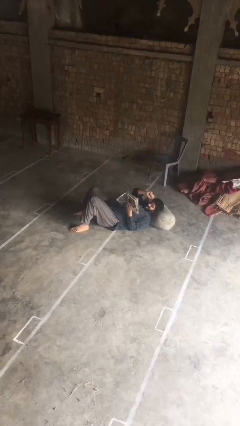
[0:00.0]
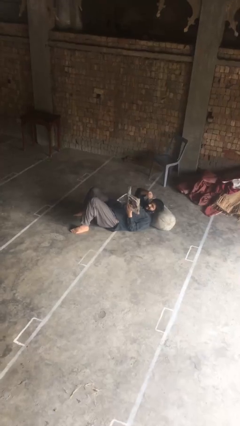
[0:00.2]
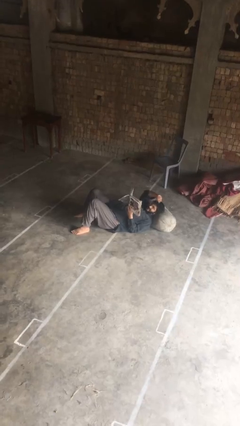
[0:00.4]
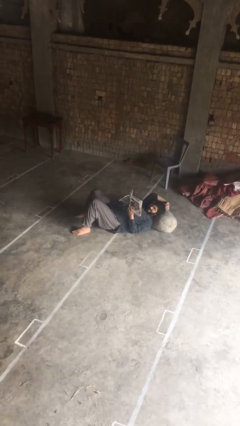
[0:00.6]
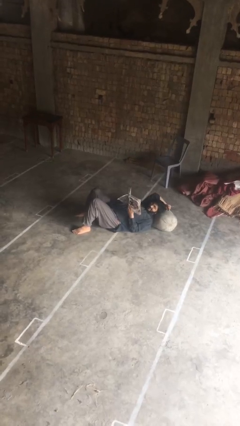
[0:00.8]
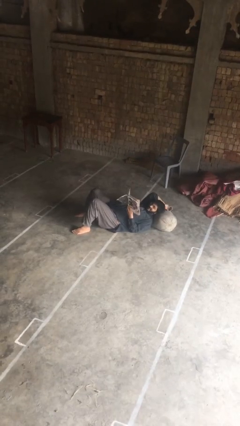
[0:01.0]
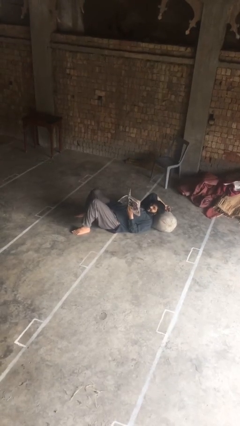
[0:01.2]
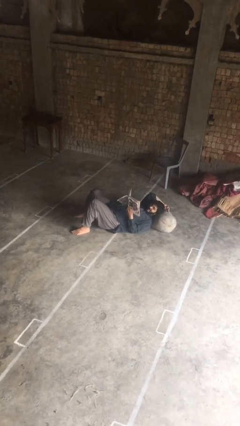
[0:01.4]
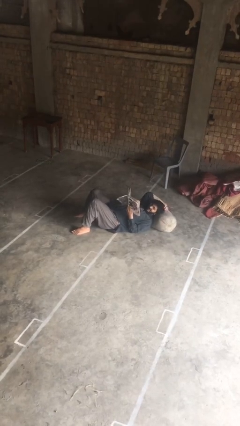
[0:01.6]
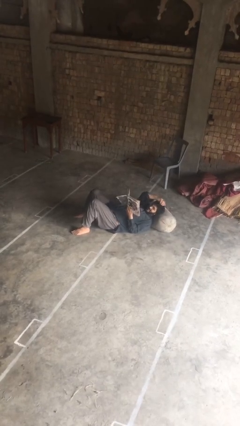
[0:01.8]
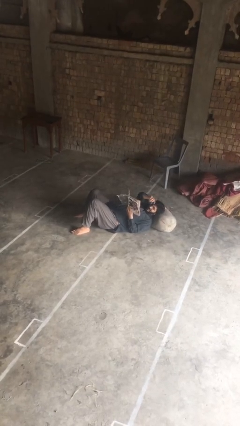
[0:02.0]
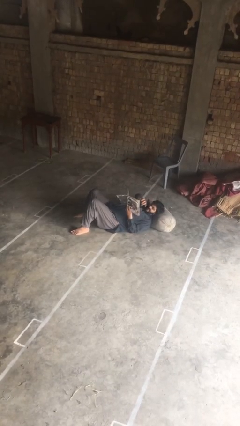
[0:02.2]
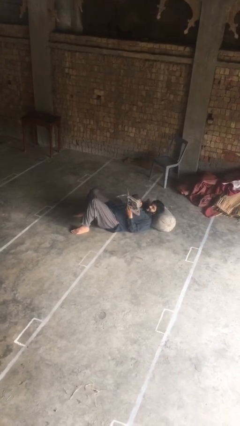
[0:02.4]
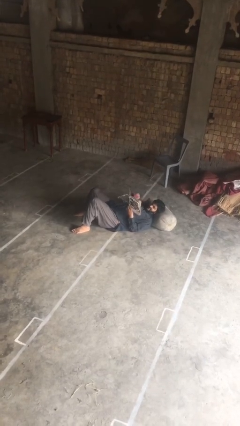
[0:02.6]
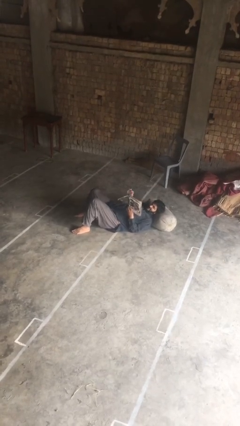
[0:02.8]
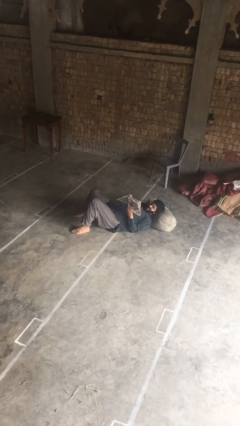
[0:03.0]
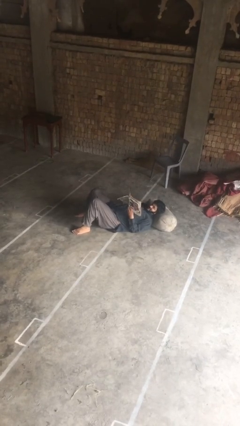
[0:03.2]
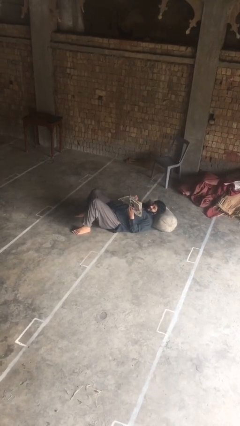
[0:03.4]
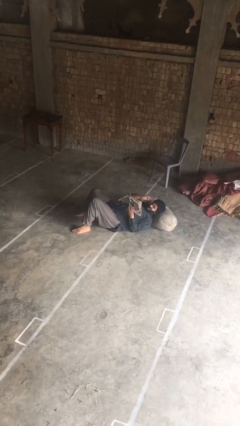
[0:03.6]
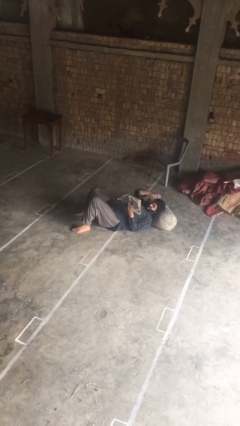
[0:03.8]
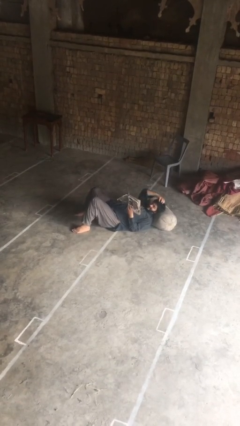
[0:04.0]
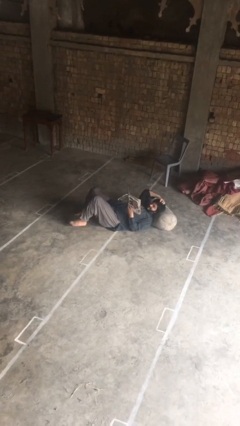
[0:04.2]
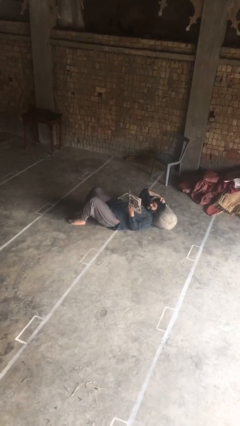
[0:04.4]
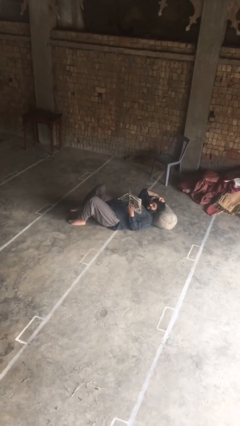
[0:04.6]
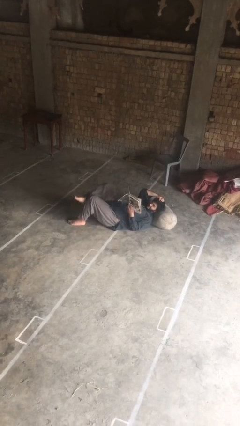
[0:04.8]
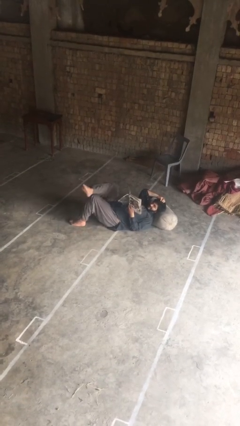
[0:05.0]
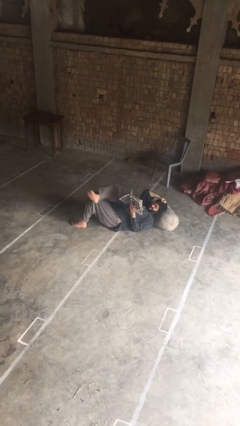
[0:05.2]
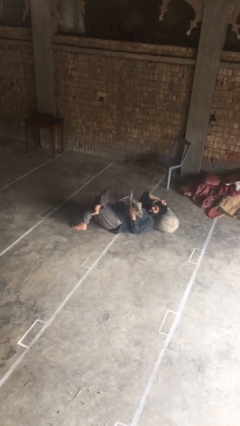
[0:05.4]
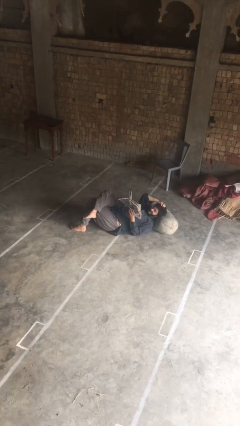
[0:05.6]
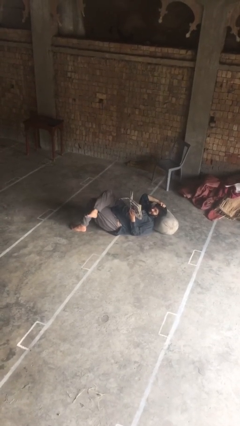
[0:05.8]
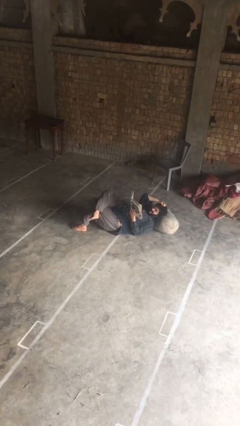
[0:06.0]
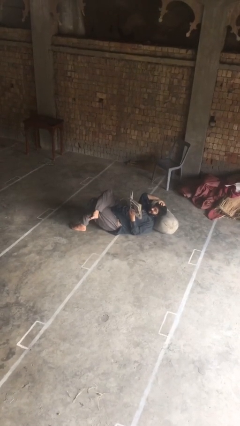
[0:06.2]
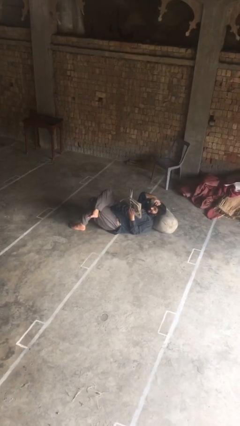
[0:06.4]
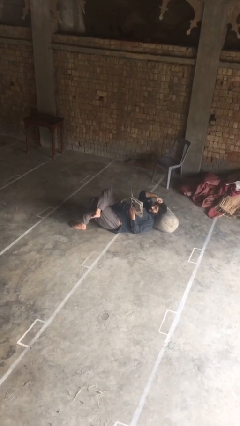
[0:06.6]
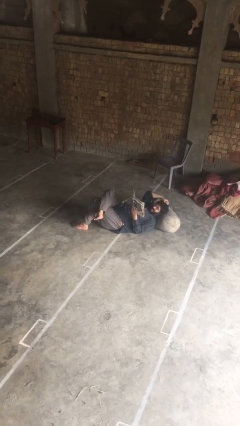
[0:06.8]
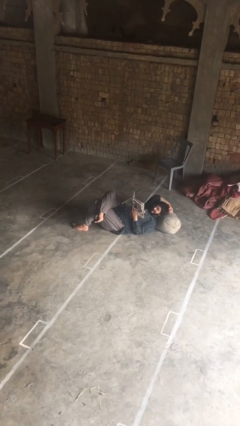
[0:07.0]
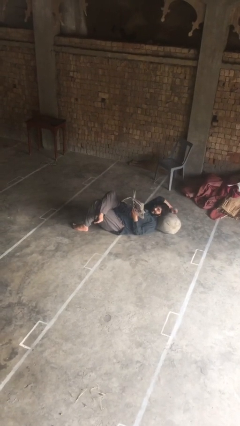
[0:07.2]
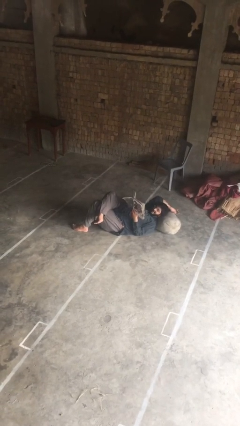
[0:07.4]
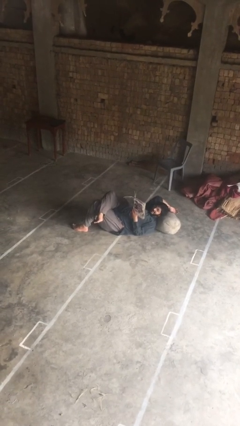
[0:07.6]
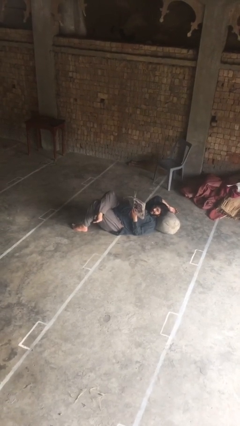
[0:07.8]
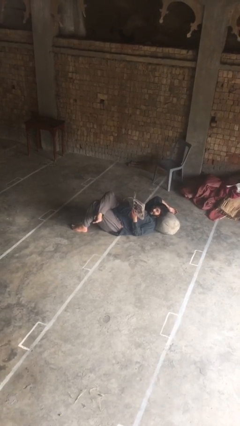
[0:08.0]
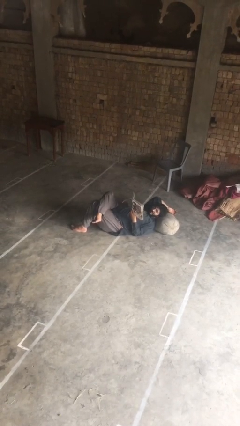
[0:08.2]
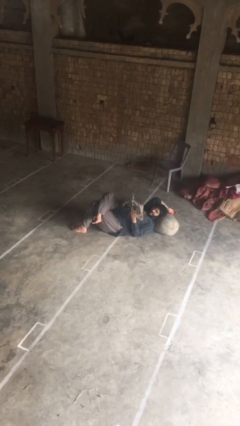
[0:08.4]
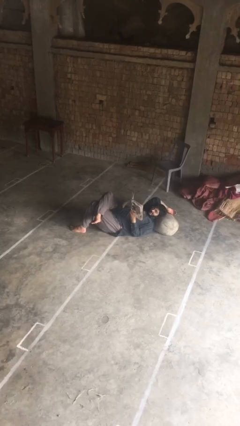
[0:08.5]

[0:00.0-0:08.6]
person reads document

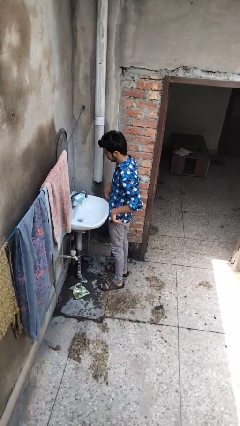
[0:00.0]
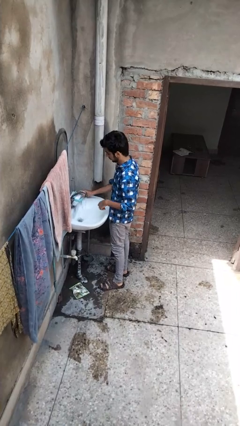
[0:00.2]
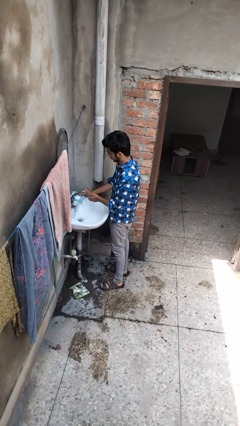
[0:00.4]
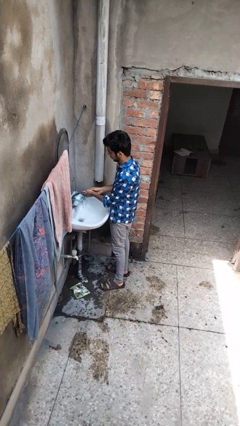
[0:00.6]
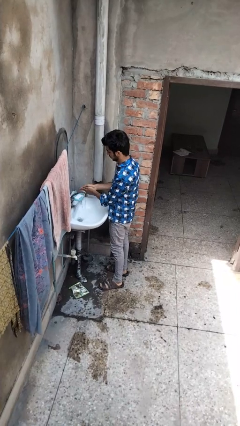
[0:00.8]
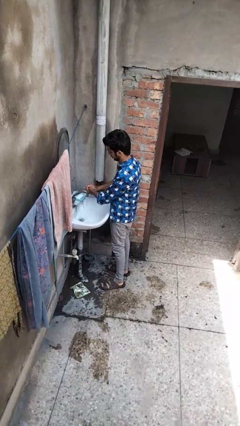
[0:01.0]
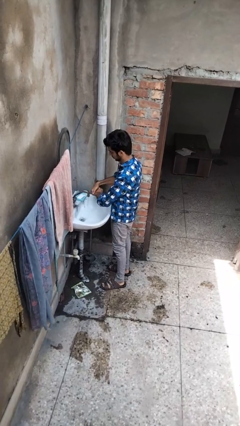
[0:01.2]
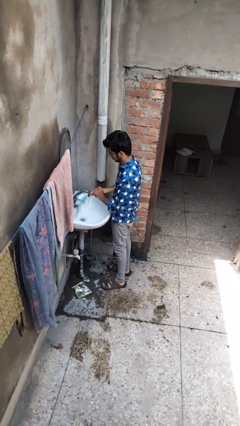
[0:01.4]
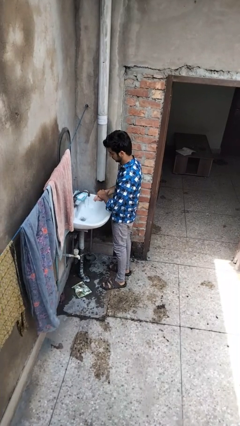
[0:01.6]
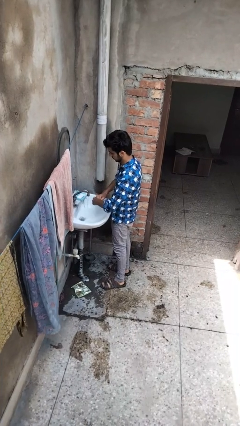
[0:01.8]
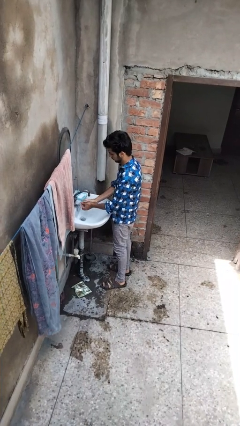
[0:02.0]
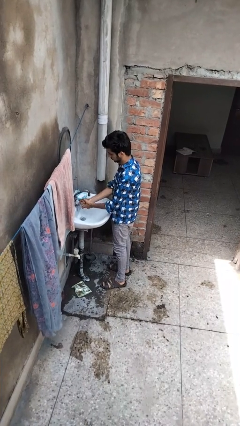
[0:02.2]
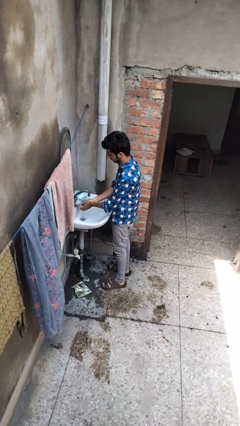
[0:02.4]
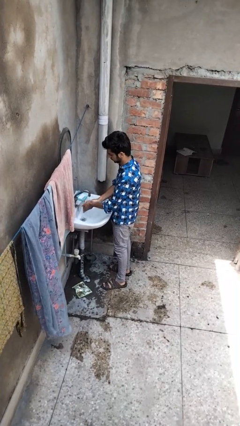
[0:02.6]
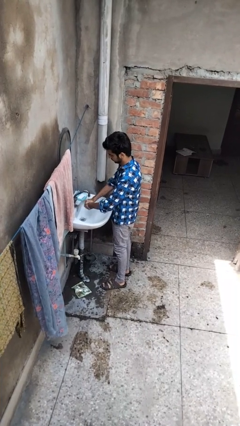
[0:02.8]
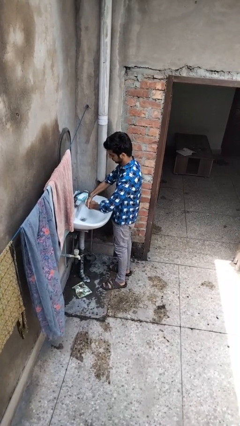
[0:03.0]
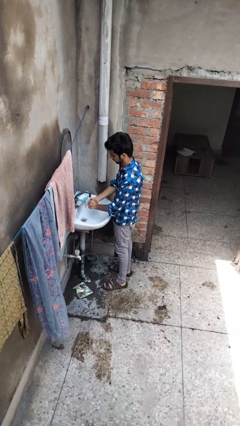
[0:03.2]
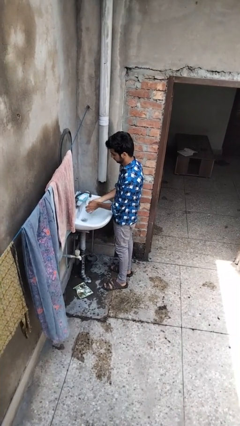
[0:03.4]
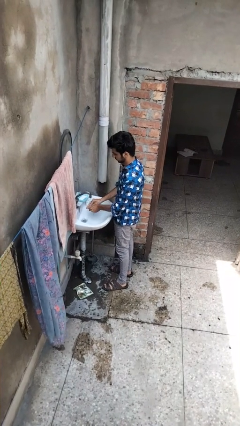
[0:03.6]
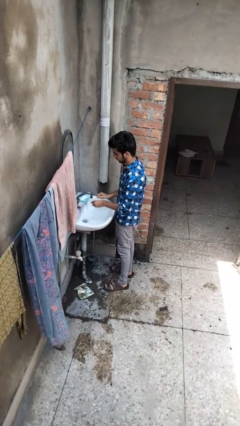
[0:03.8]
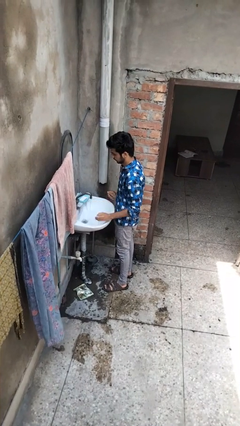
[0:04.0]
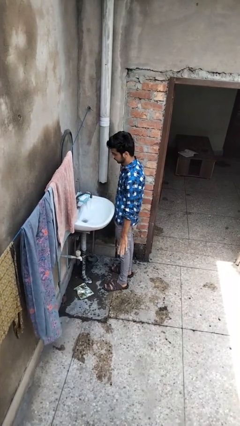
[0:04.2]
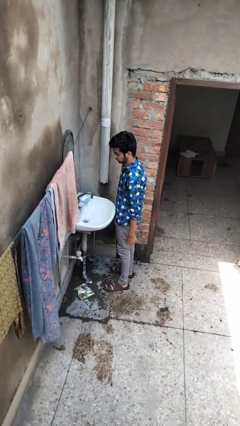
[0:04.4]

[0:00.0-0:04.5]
person washes hands

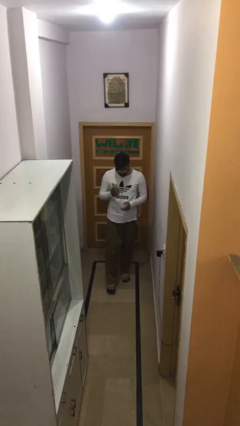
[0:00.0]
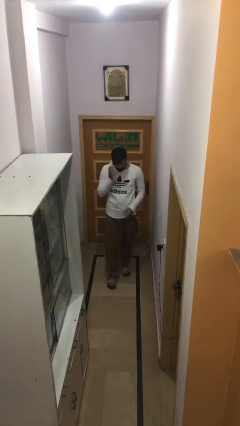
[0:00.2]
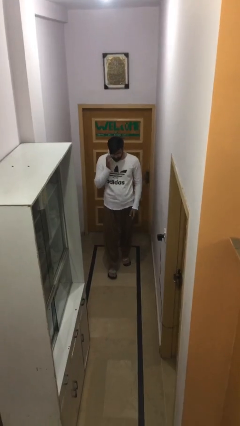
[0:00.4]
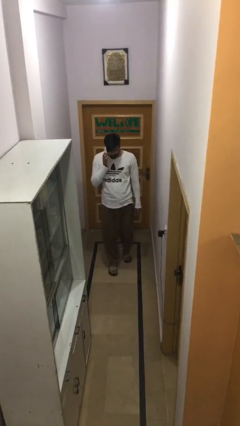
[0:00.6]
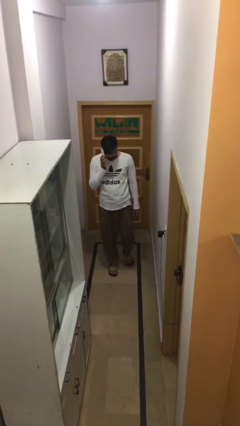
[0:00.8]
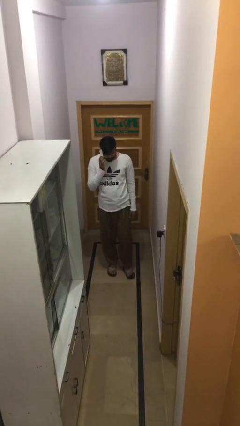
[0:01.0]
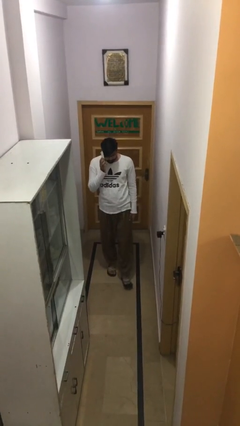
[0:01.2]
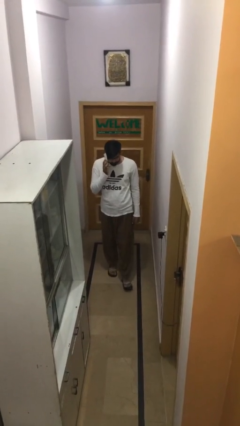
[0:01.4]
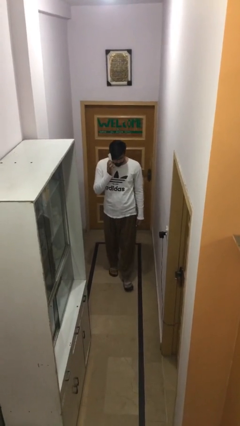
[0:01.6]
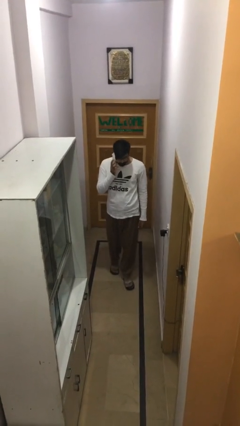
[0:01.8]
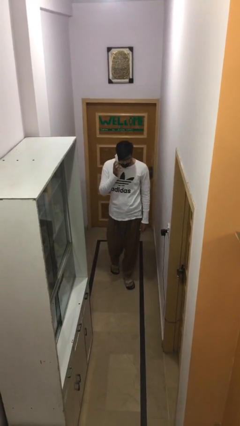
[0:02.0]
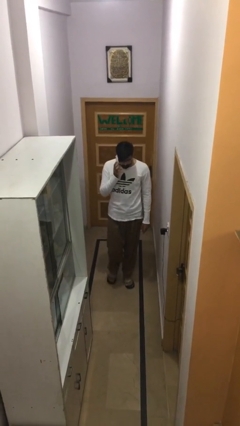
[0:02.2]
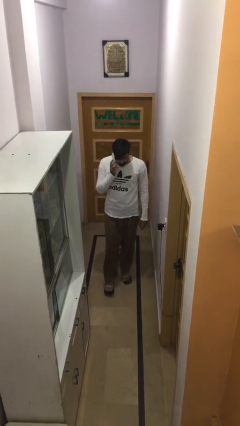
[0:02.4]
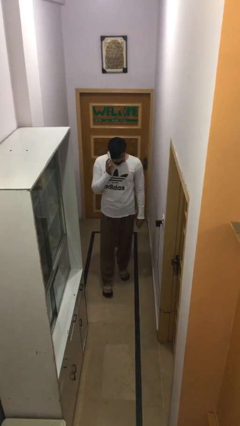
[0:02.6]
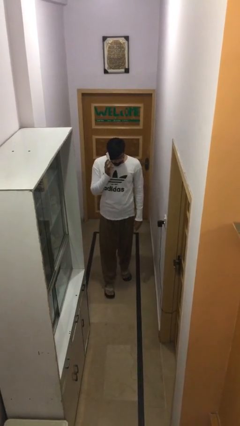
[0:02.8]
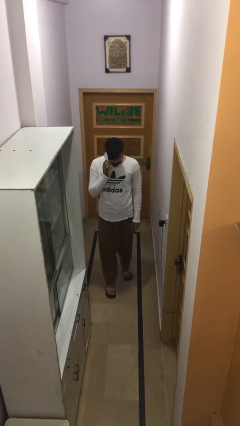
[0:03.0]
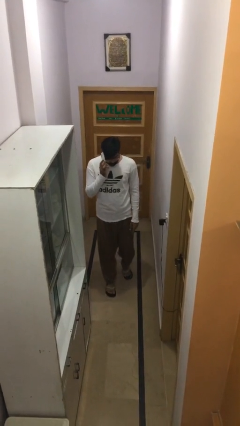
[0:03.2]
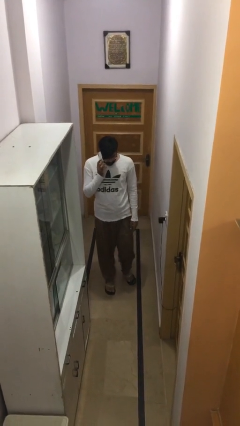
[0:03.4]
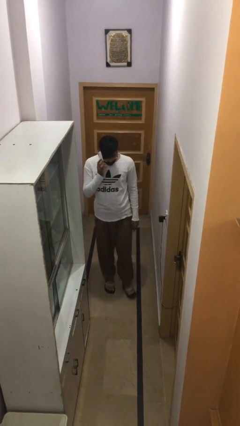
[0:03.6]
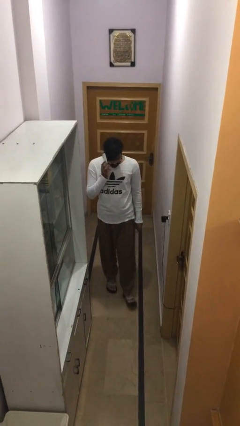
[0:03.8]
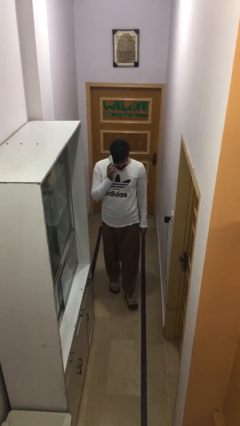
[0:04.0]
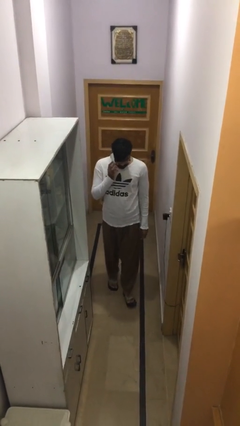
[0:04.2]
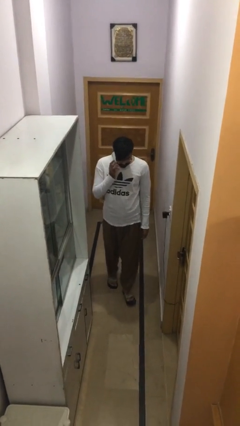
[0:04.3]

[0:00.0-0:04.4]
person talks on phone

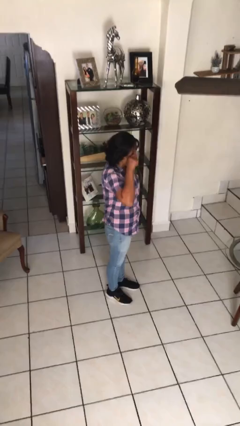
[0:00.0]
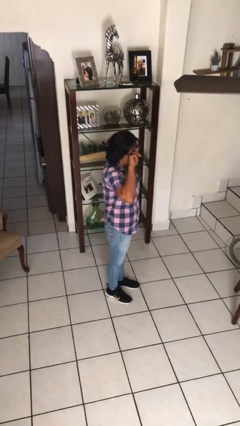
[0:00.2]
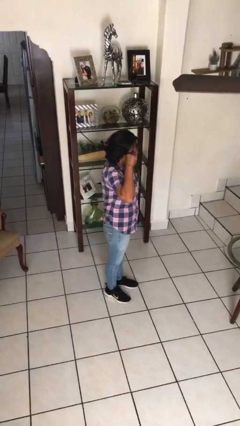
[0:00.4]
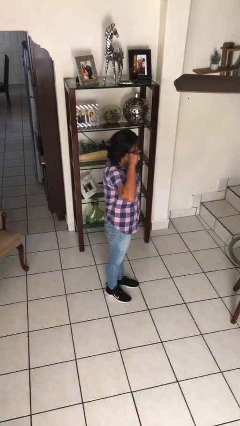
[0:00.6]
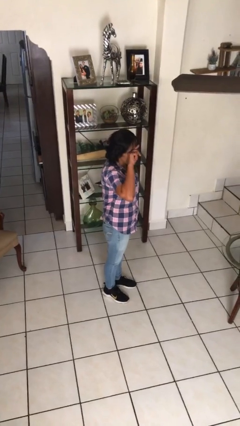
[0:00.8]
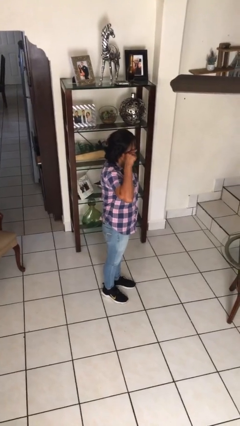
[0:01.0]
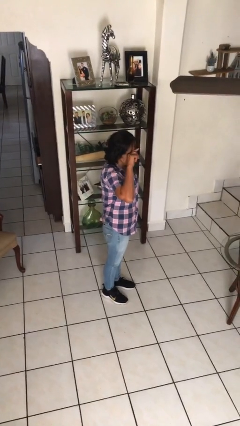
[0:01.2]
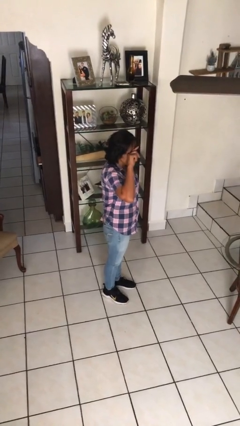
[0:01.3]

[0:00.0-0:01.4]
person rubs eyes
